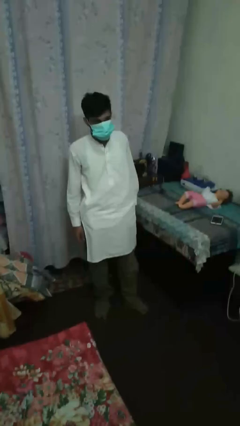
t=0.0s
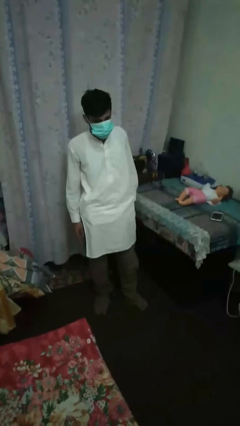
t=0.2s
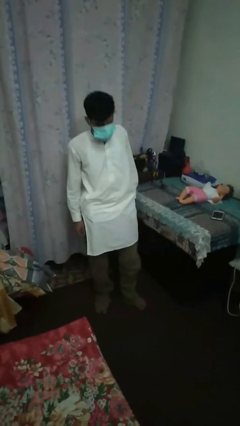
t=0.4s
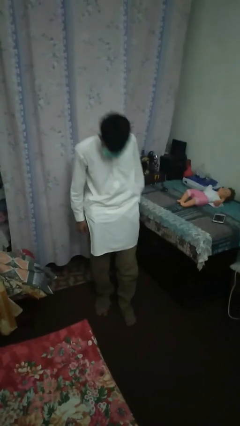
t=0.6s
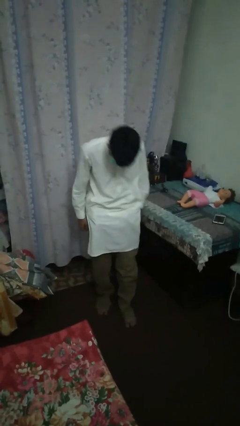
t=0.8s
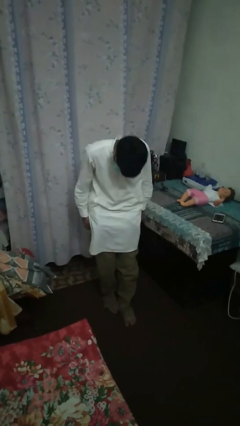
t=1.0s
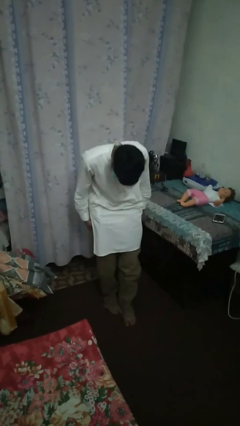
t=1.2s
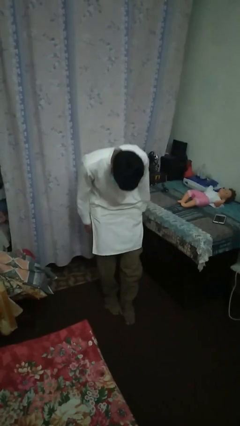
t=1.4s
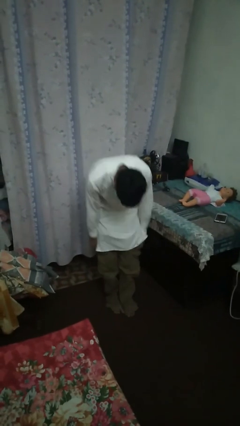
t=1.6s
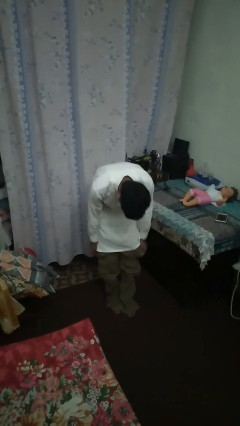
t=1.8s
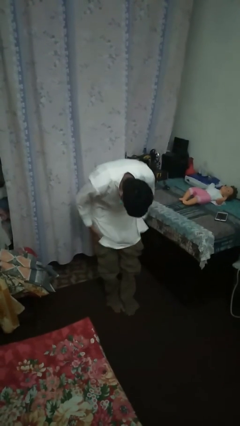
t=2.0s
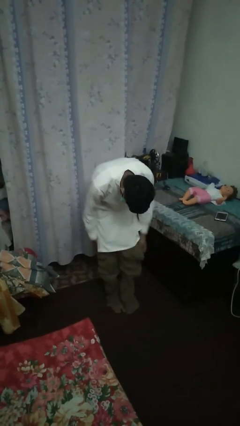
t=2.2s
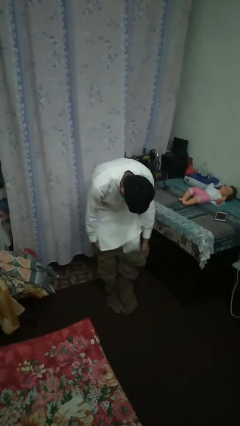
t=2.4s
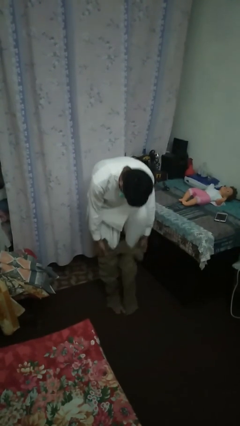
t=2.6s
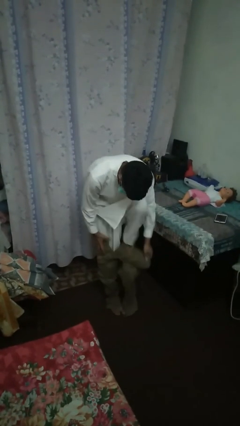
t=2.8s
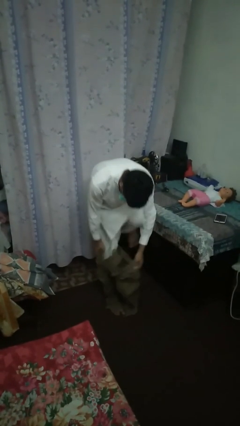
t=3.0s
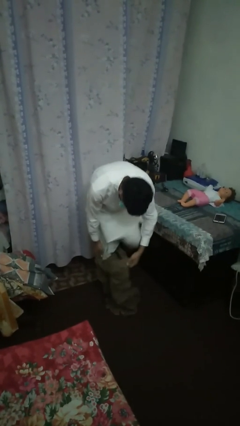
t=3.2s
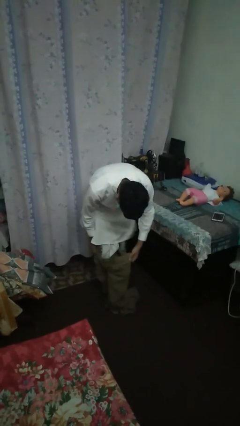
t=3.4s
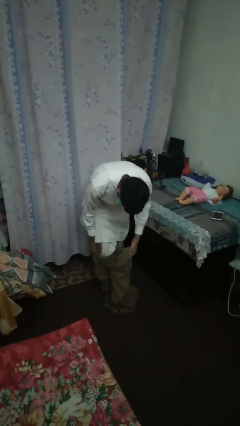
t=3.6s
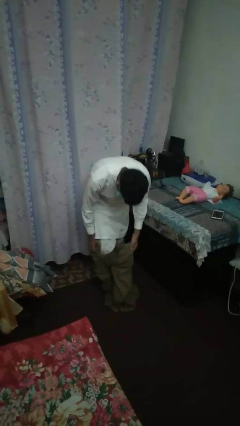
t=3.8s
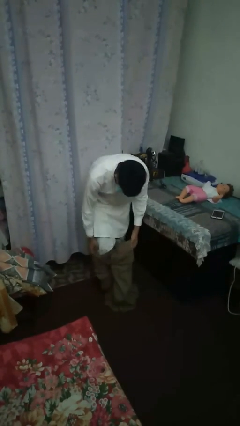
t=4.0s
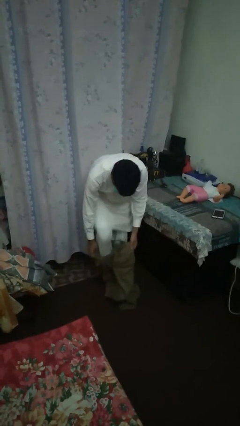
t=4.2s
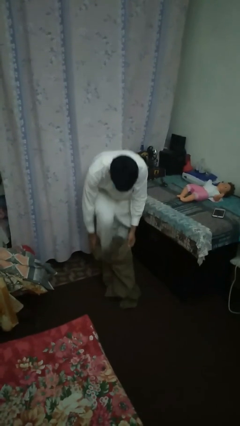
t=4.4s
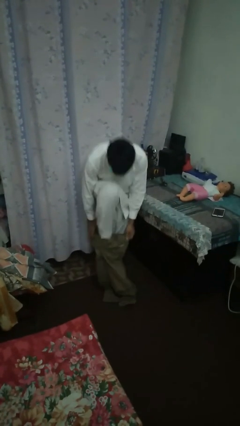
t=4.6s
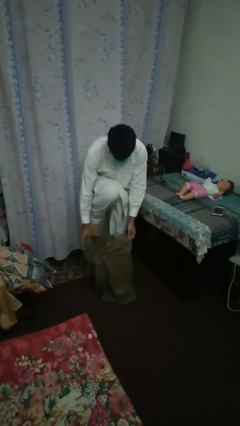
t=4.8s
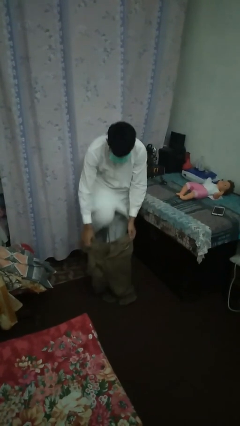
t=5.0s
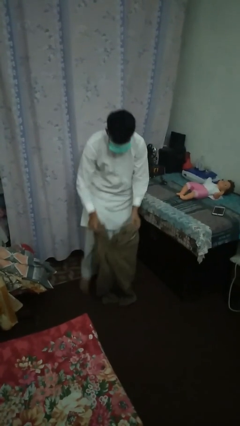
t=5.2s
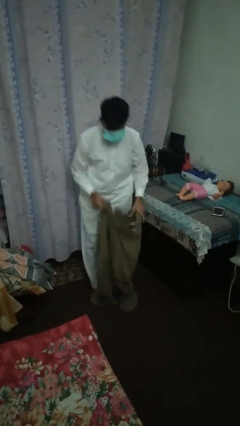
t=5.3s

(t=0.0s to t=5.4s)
person takes off pants

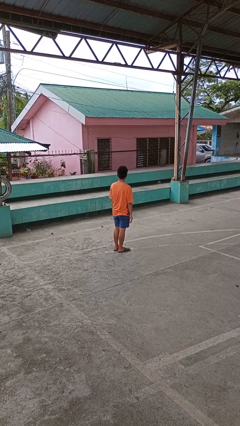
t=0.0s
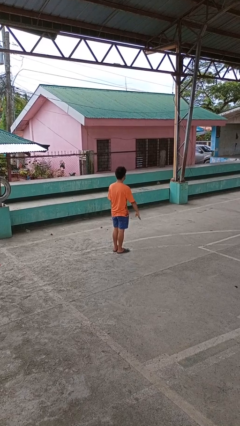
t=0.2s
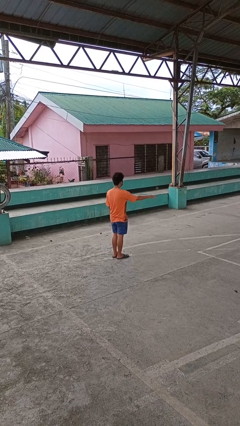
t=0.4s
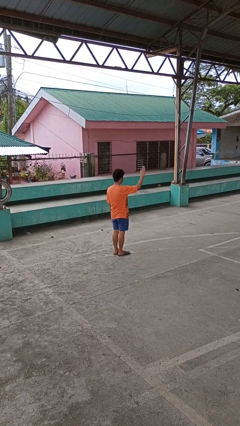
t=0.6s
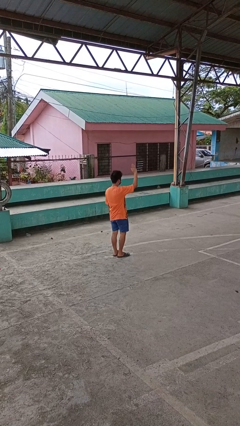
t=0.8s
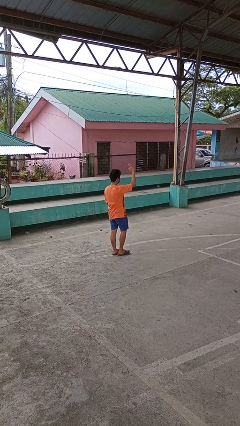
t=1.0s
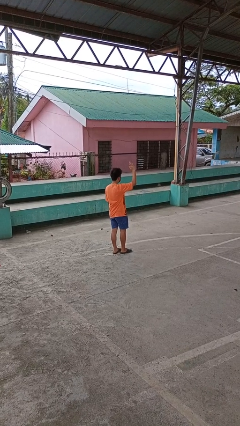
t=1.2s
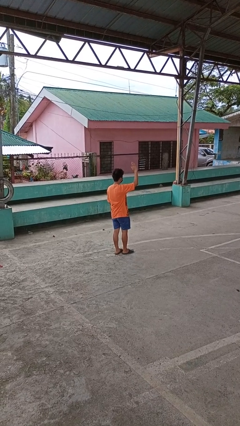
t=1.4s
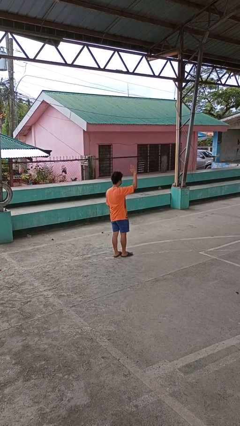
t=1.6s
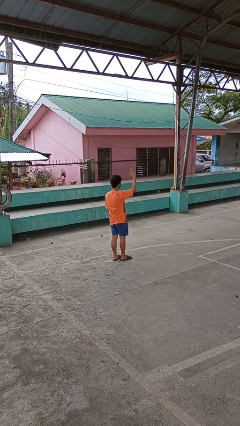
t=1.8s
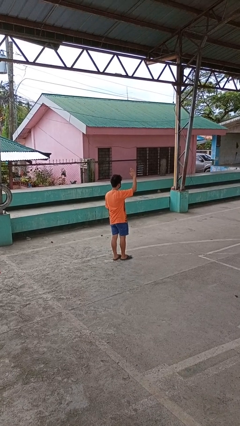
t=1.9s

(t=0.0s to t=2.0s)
person gestures raise hand

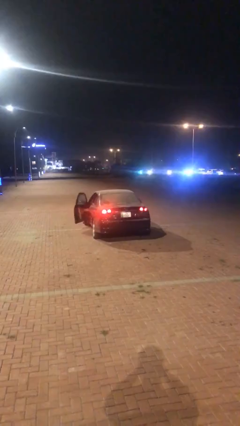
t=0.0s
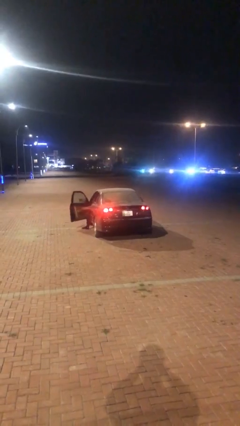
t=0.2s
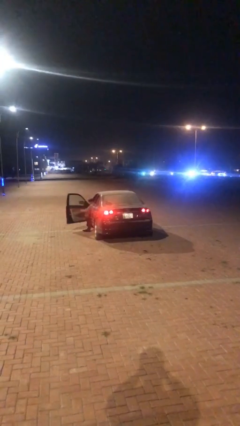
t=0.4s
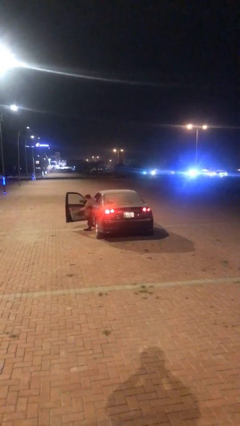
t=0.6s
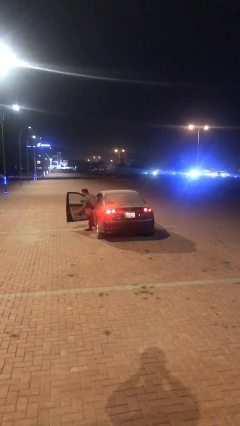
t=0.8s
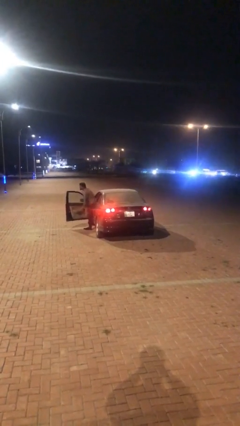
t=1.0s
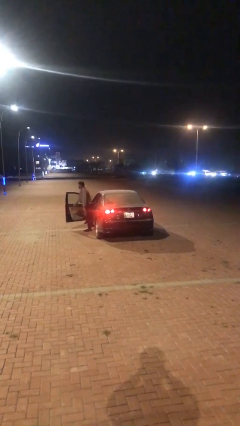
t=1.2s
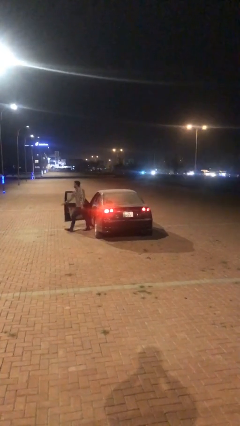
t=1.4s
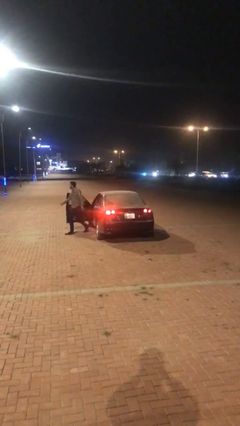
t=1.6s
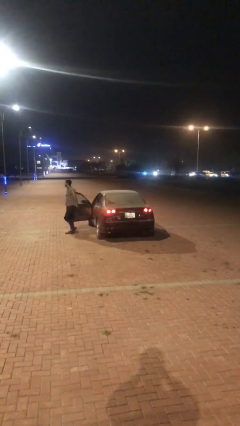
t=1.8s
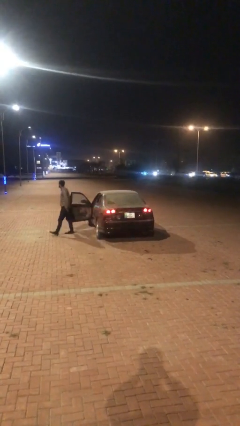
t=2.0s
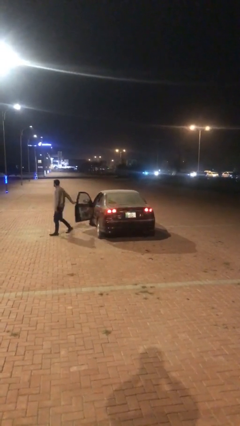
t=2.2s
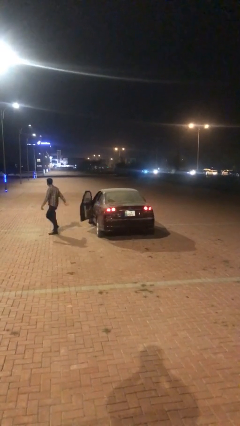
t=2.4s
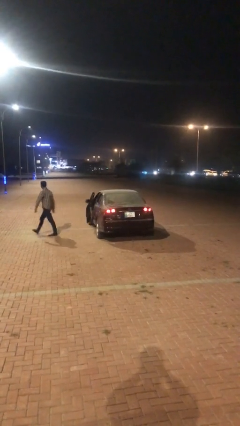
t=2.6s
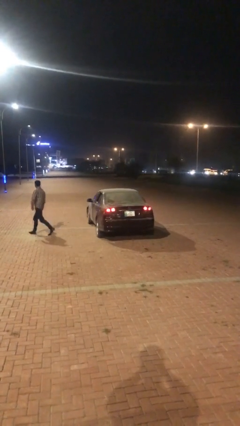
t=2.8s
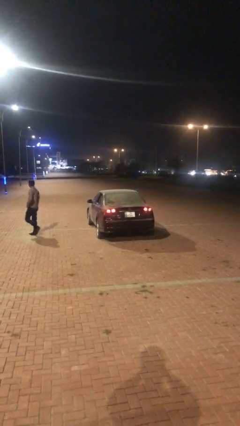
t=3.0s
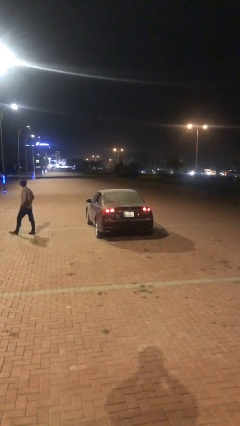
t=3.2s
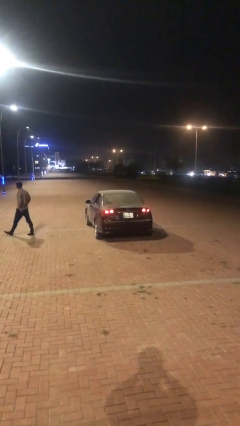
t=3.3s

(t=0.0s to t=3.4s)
car drops off person

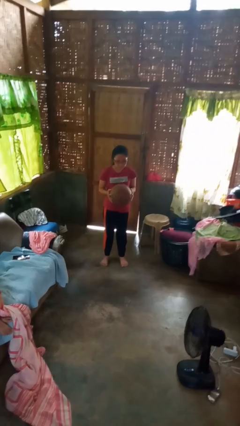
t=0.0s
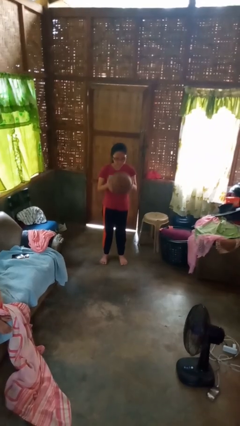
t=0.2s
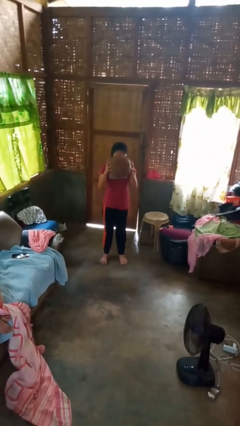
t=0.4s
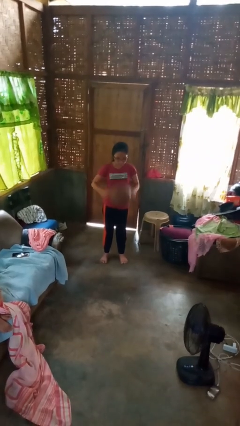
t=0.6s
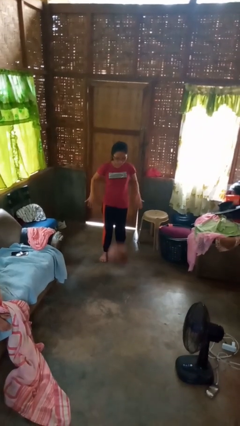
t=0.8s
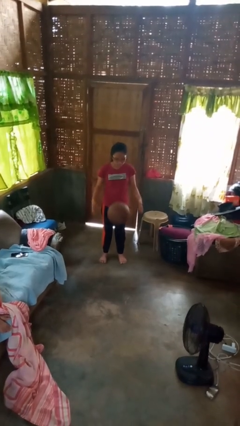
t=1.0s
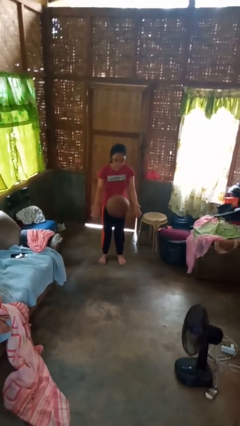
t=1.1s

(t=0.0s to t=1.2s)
person bounces ball on floor

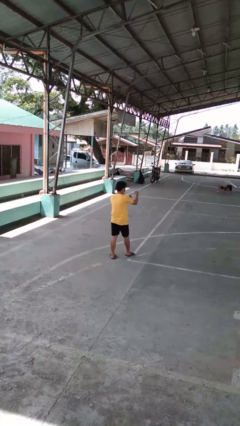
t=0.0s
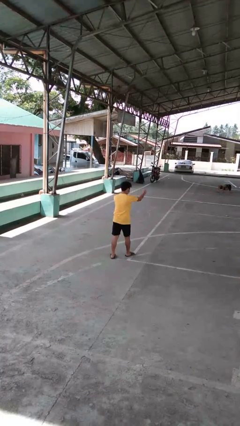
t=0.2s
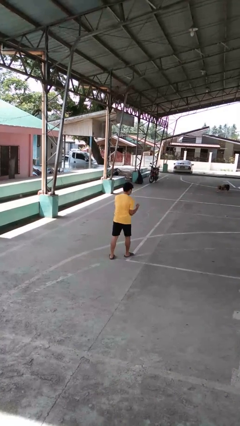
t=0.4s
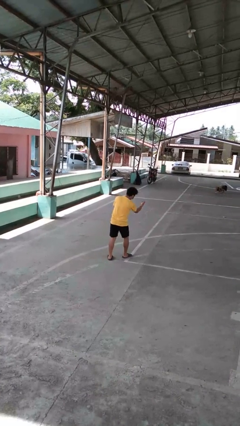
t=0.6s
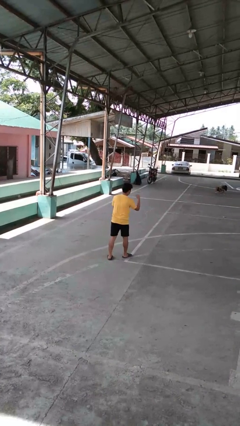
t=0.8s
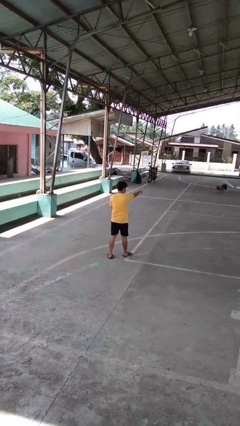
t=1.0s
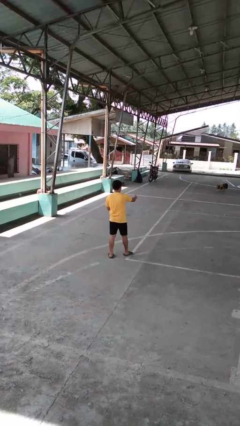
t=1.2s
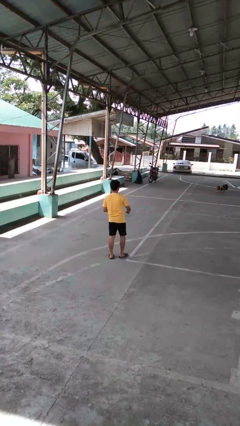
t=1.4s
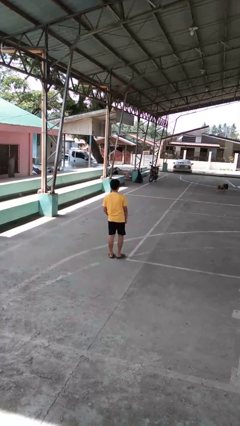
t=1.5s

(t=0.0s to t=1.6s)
person punches

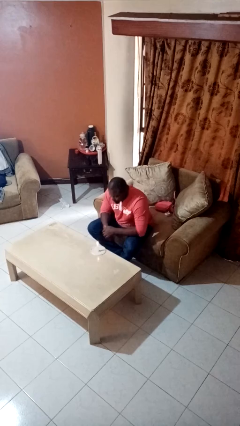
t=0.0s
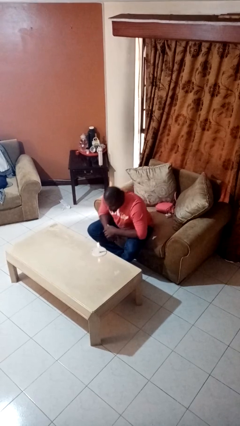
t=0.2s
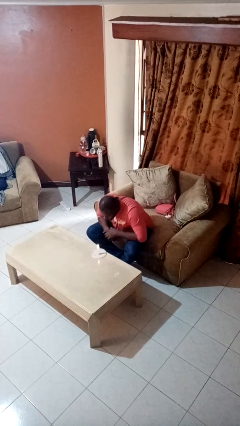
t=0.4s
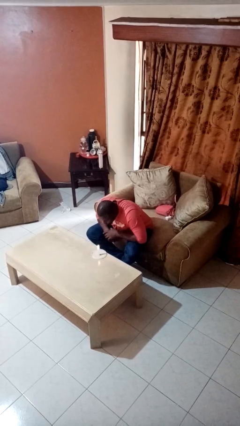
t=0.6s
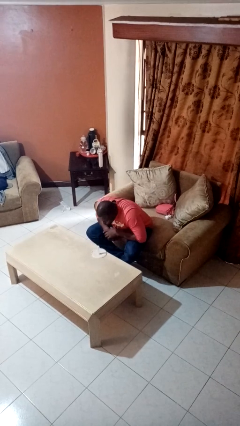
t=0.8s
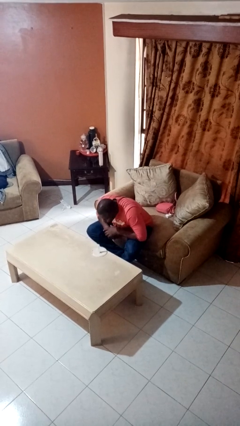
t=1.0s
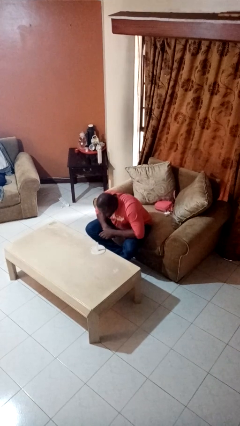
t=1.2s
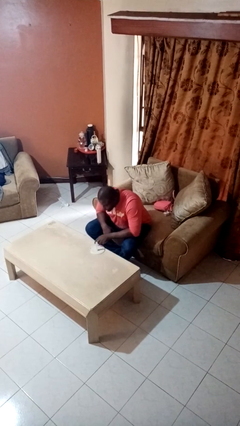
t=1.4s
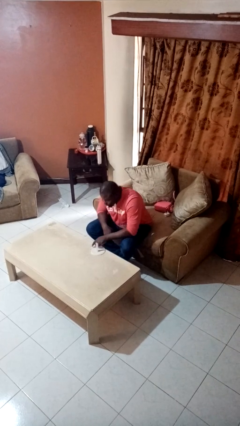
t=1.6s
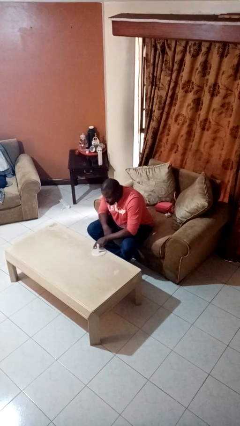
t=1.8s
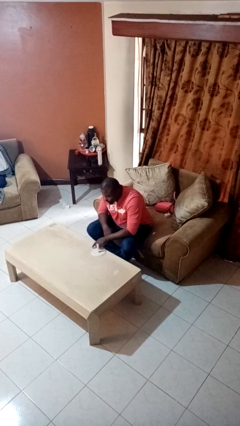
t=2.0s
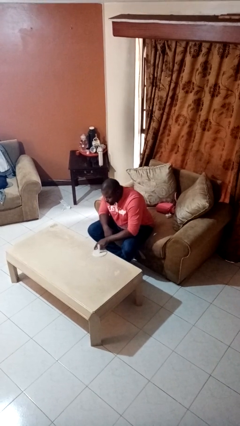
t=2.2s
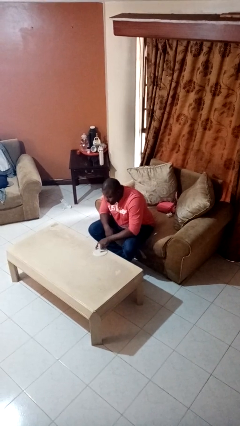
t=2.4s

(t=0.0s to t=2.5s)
person extinguishes candle

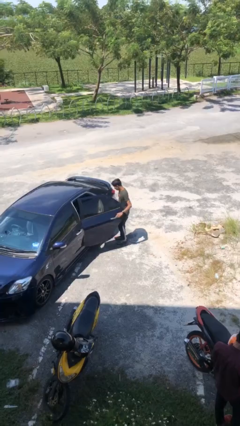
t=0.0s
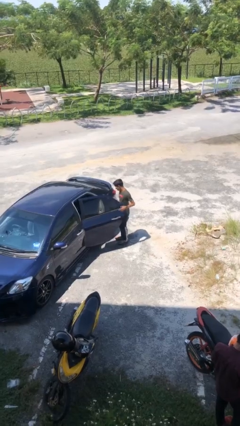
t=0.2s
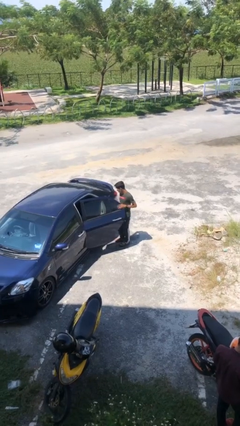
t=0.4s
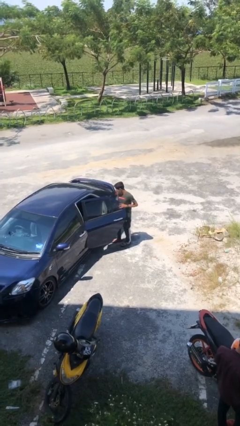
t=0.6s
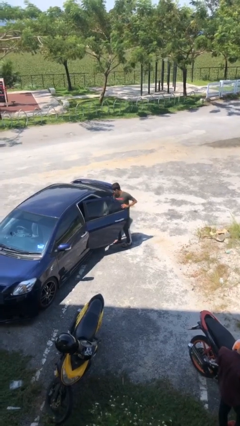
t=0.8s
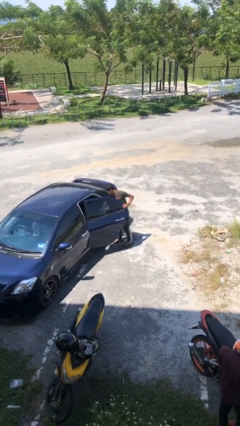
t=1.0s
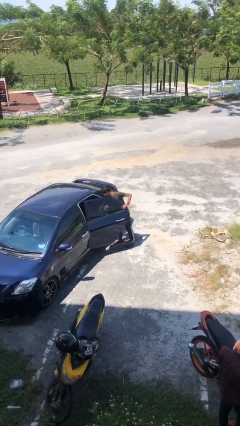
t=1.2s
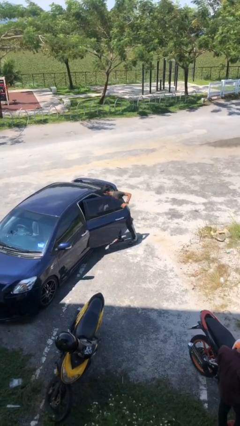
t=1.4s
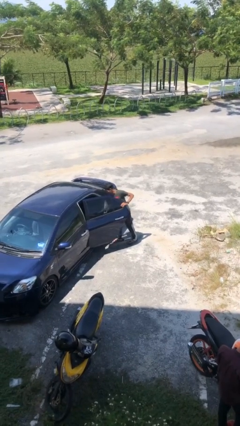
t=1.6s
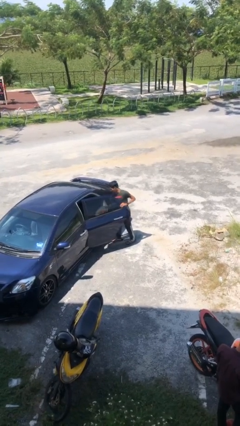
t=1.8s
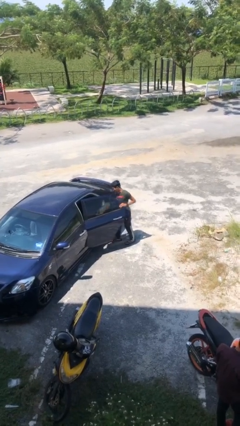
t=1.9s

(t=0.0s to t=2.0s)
person unloads car
